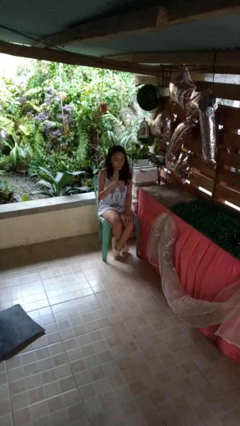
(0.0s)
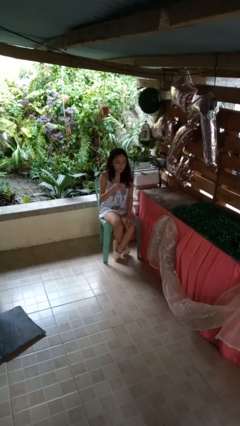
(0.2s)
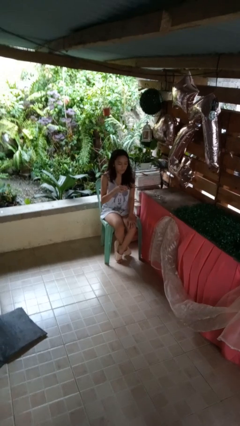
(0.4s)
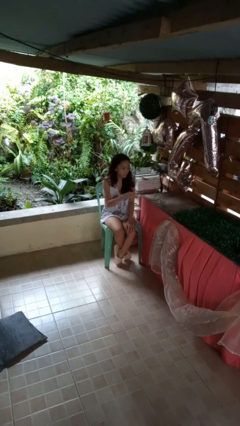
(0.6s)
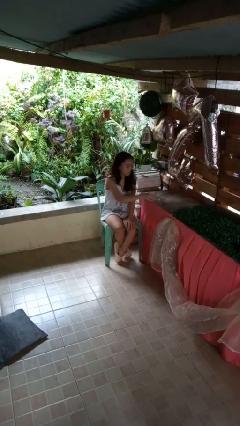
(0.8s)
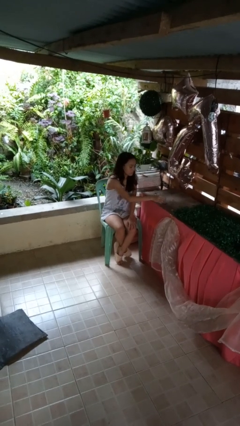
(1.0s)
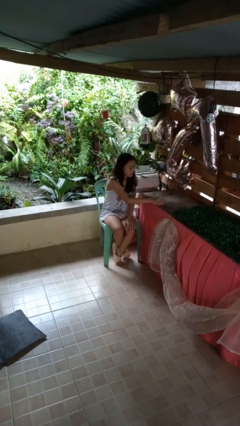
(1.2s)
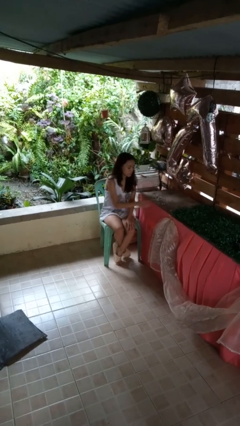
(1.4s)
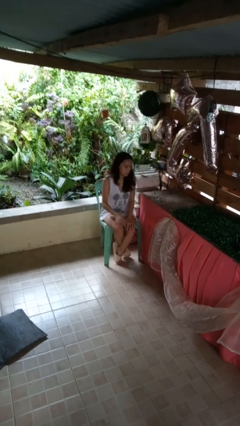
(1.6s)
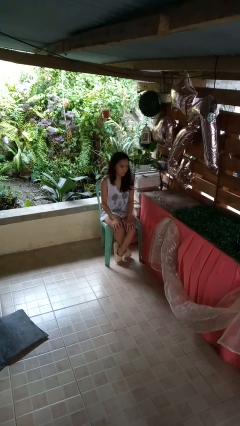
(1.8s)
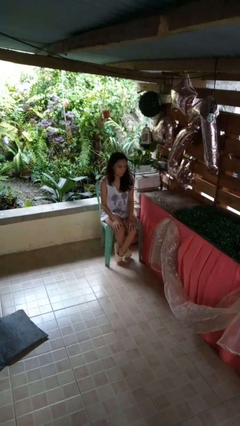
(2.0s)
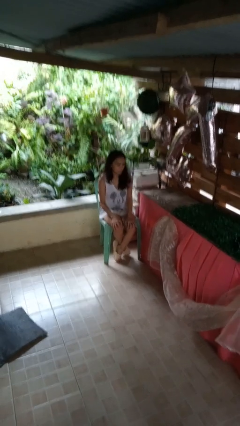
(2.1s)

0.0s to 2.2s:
person puts down object on table

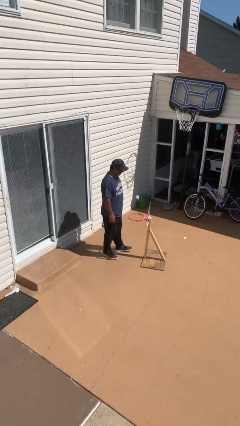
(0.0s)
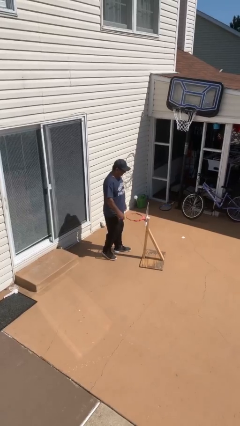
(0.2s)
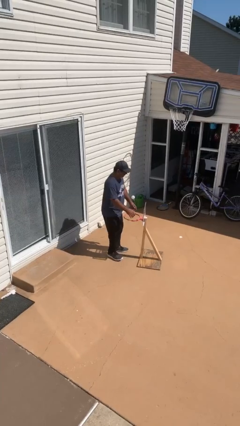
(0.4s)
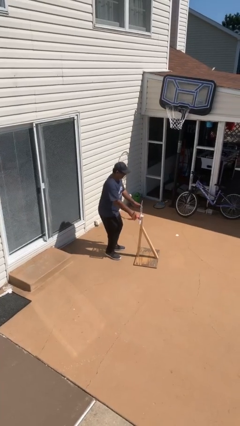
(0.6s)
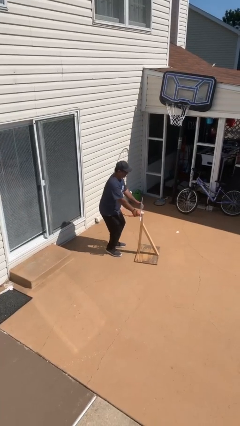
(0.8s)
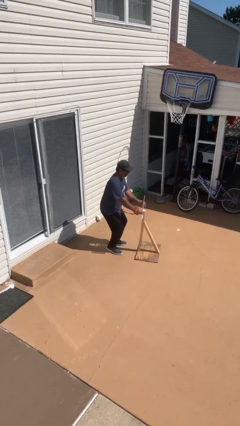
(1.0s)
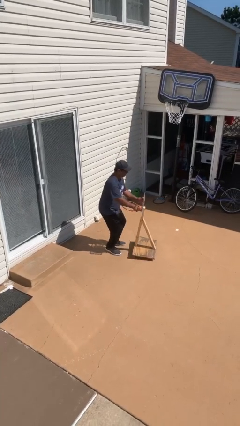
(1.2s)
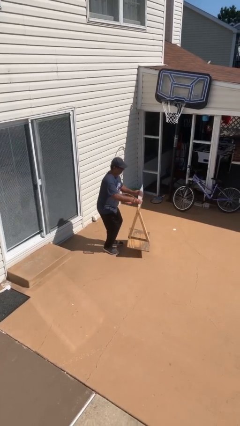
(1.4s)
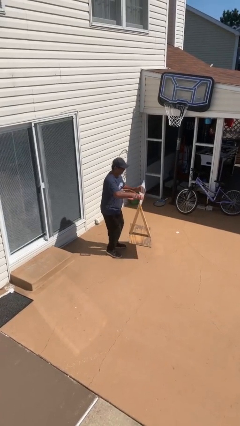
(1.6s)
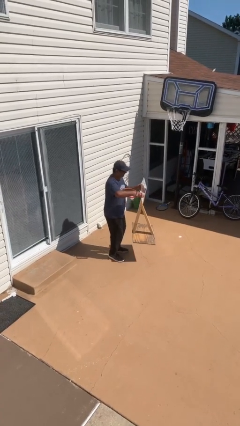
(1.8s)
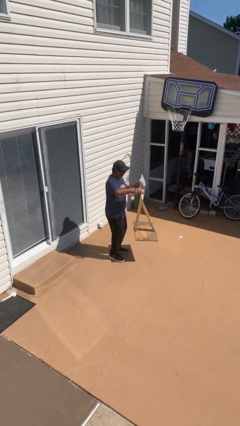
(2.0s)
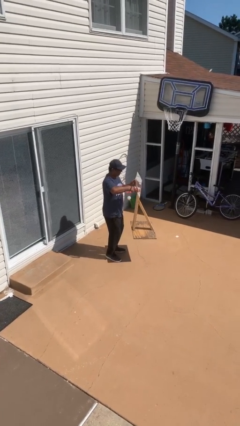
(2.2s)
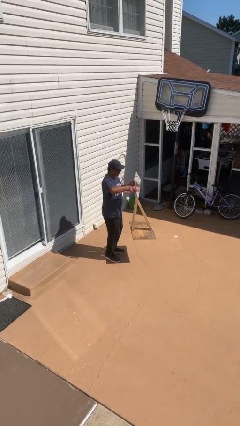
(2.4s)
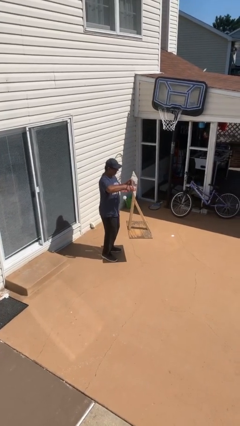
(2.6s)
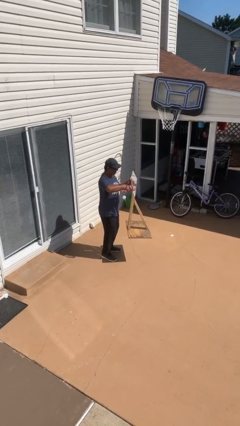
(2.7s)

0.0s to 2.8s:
person picks up object from floor

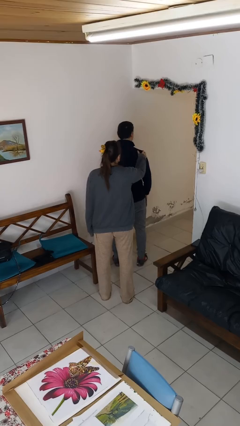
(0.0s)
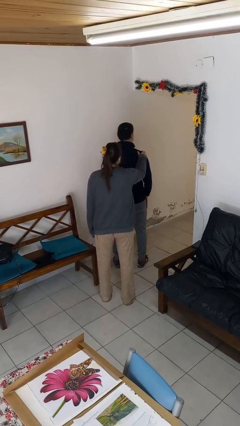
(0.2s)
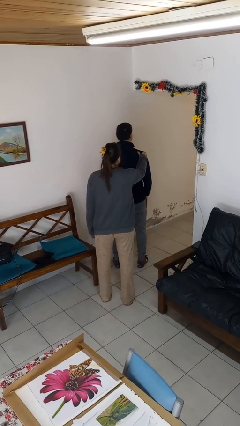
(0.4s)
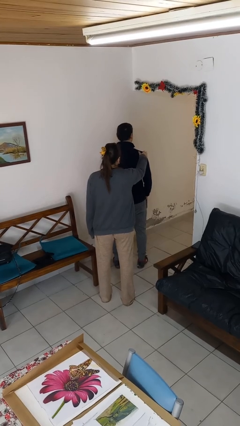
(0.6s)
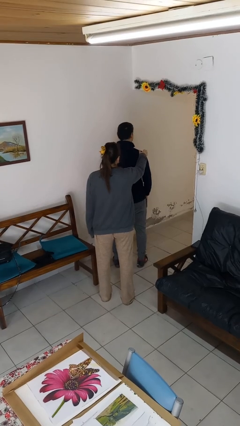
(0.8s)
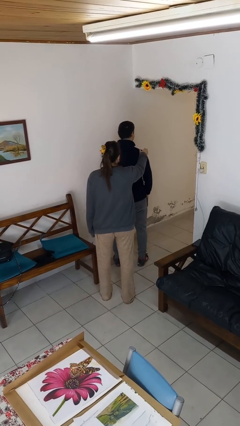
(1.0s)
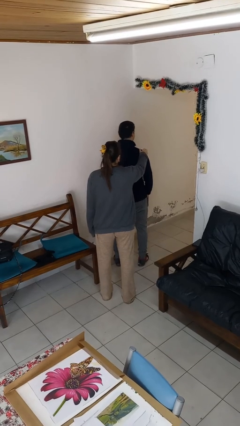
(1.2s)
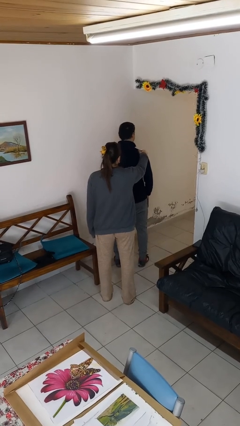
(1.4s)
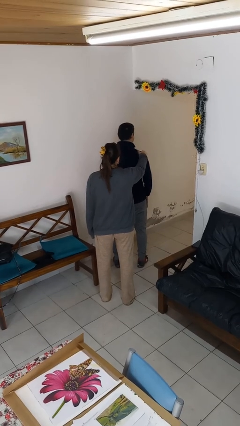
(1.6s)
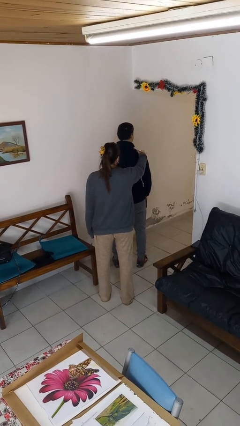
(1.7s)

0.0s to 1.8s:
person touches back of person

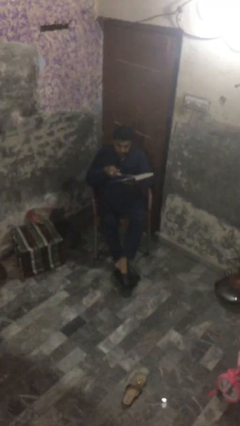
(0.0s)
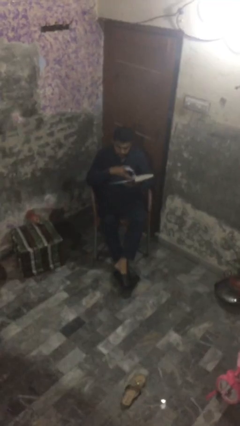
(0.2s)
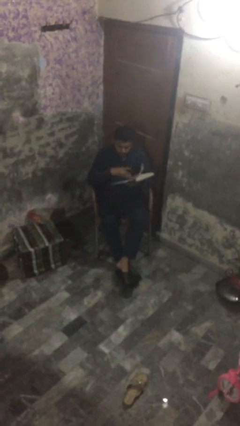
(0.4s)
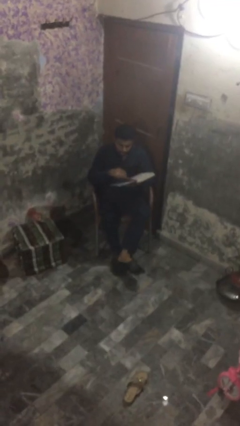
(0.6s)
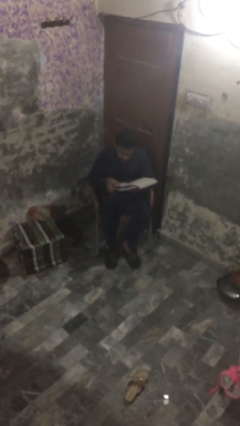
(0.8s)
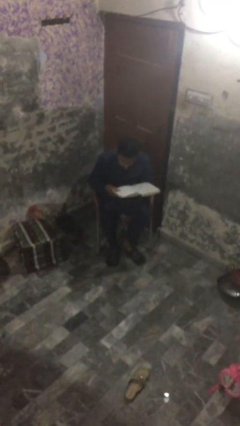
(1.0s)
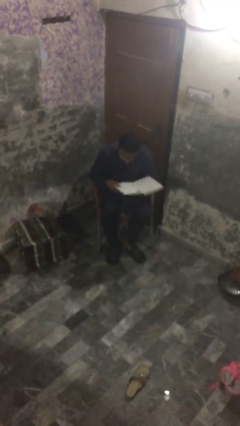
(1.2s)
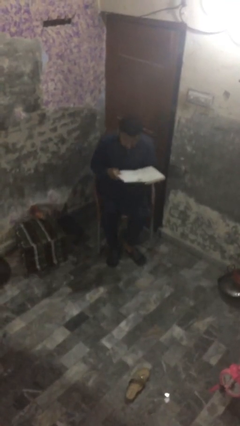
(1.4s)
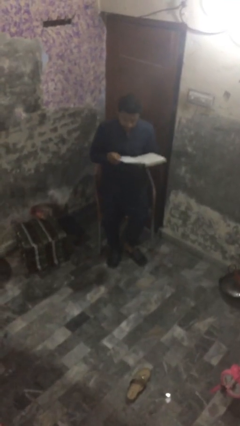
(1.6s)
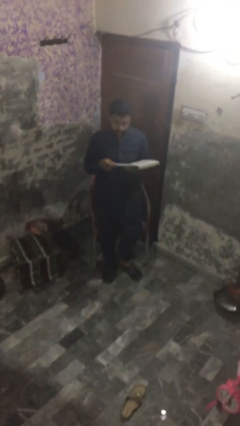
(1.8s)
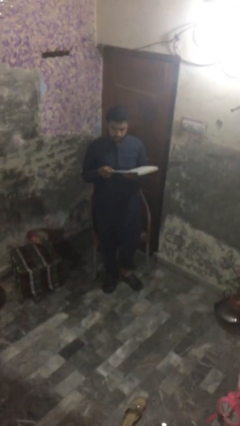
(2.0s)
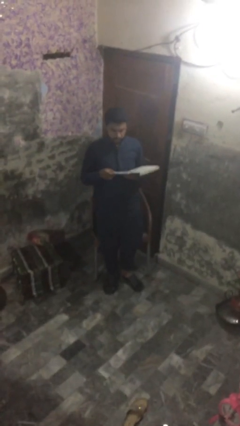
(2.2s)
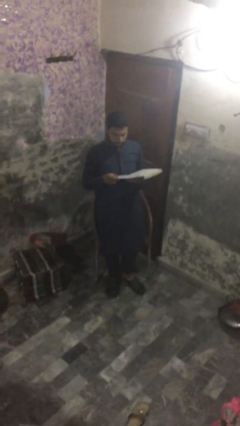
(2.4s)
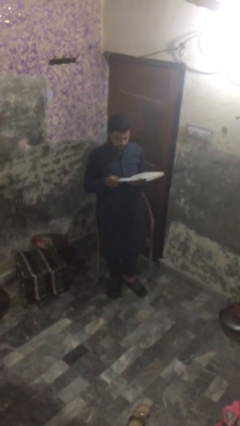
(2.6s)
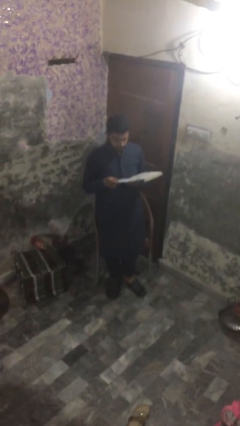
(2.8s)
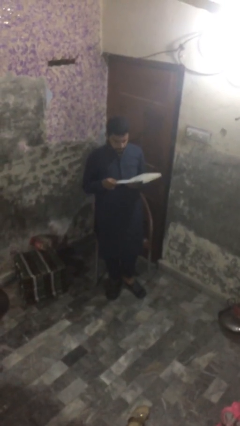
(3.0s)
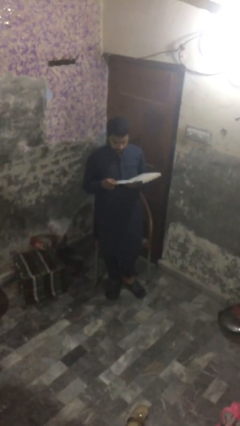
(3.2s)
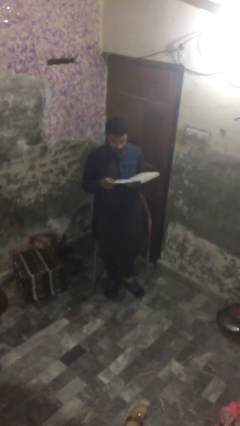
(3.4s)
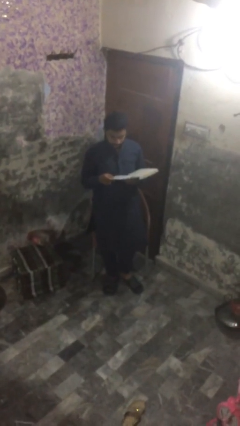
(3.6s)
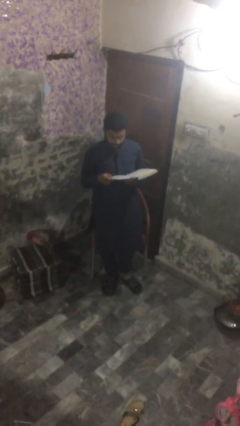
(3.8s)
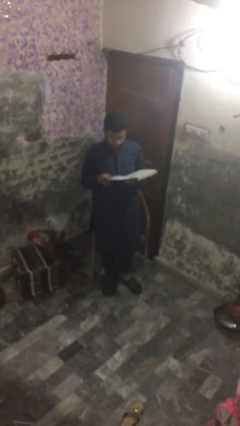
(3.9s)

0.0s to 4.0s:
person stands up

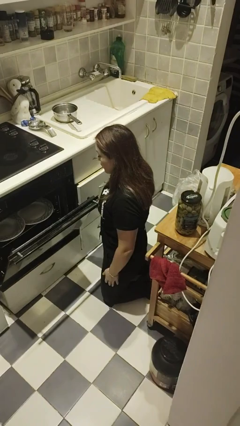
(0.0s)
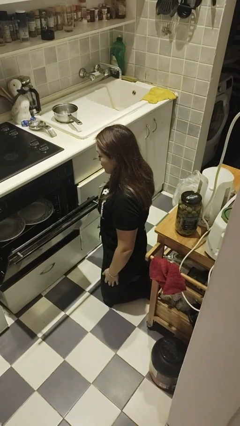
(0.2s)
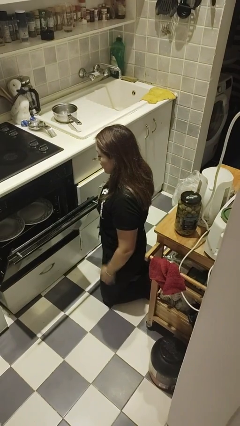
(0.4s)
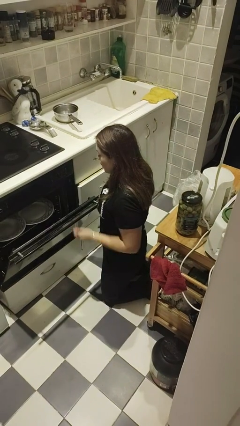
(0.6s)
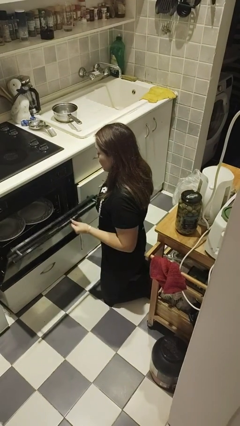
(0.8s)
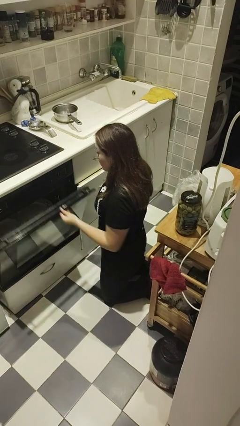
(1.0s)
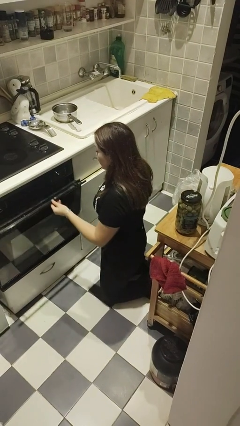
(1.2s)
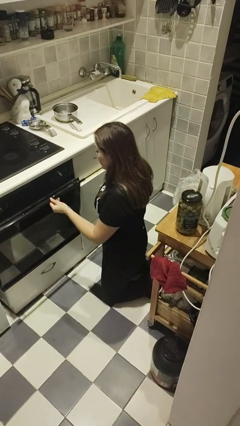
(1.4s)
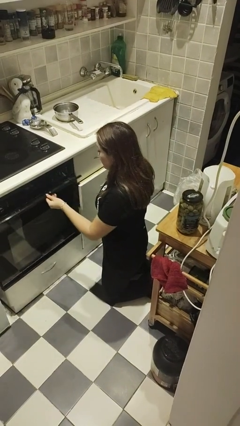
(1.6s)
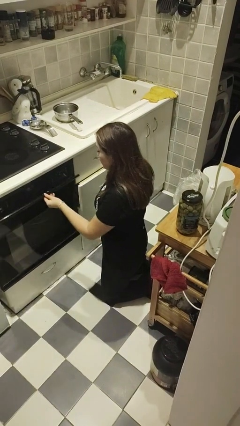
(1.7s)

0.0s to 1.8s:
person closes oven door

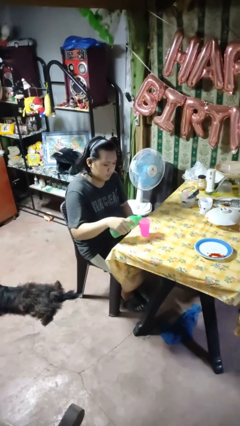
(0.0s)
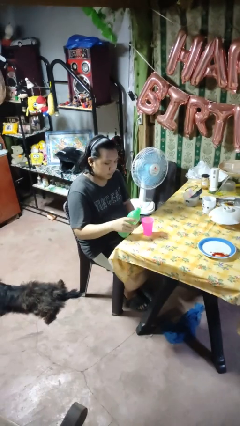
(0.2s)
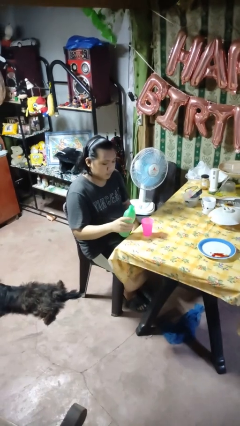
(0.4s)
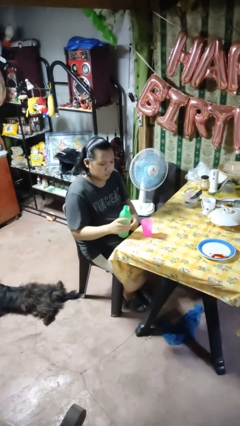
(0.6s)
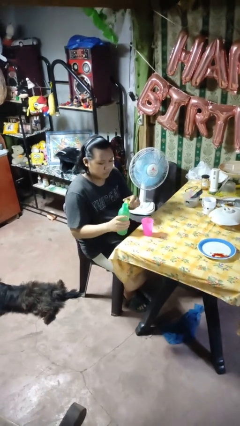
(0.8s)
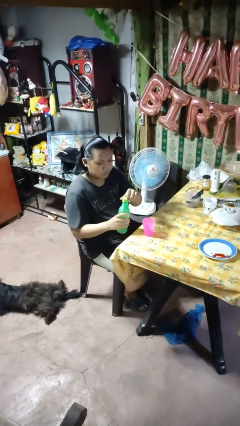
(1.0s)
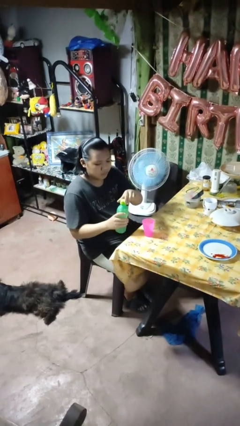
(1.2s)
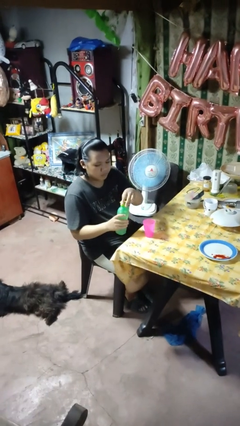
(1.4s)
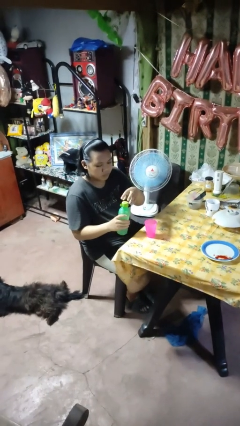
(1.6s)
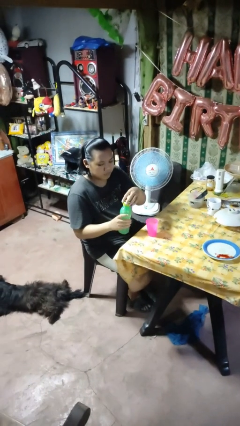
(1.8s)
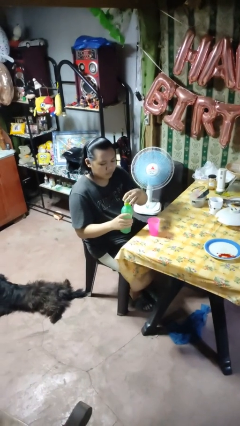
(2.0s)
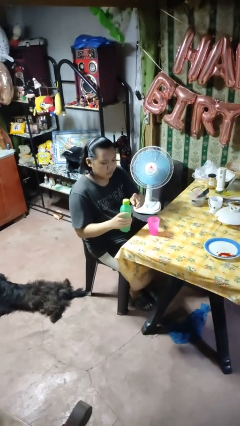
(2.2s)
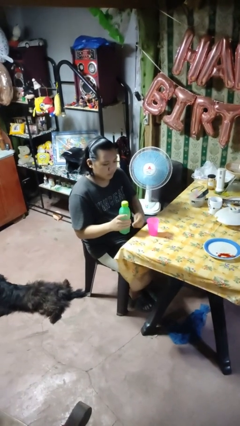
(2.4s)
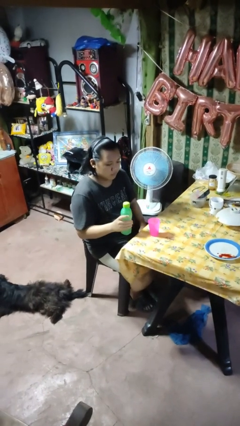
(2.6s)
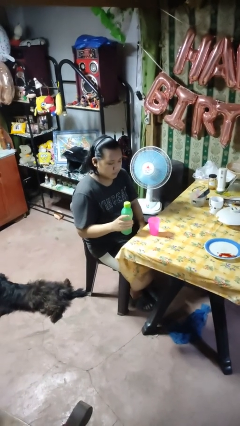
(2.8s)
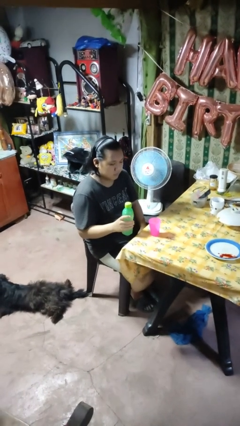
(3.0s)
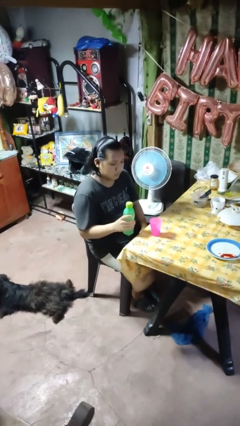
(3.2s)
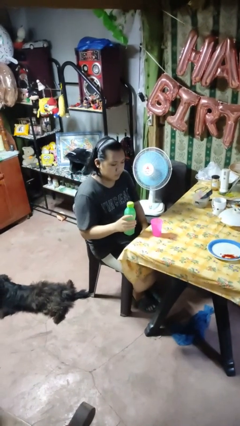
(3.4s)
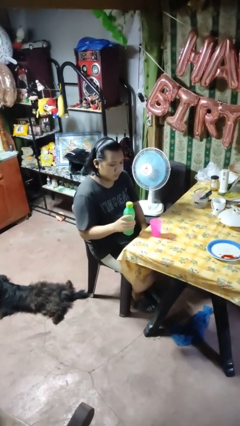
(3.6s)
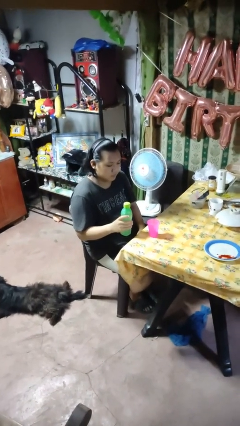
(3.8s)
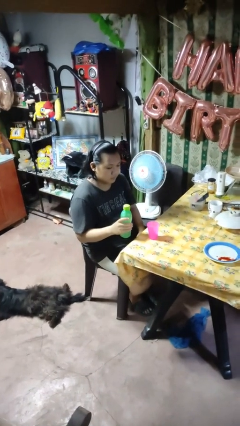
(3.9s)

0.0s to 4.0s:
person screws lid to bottle

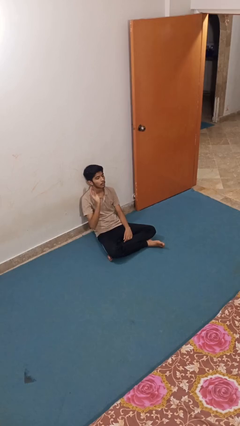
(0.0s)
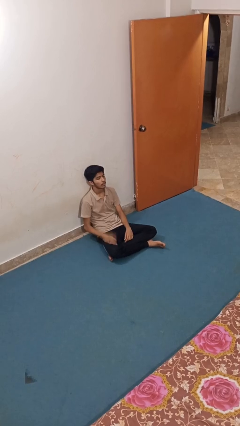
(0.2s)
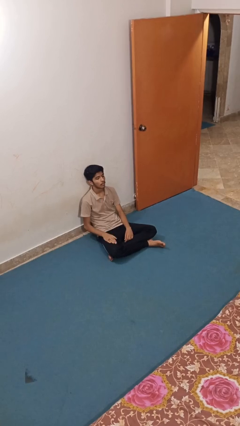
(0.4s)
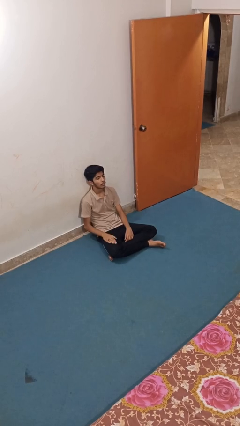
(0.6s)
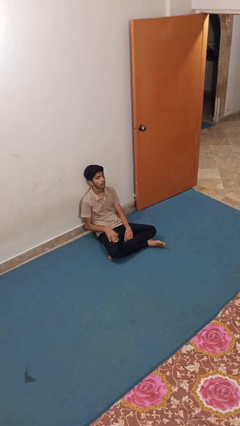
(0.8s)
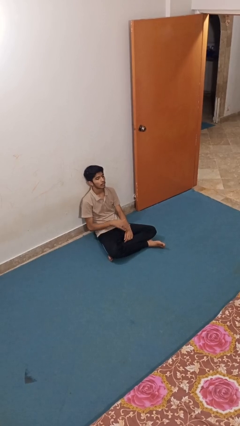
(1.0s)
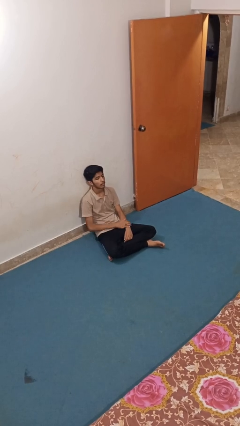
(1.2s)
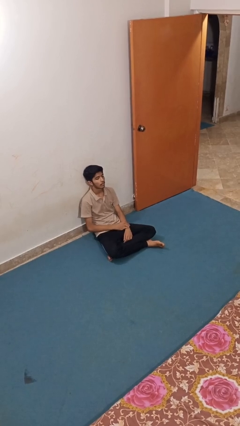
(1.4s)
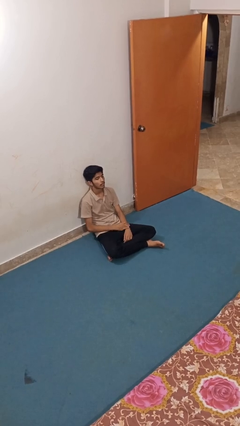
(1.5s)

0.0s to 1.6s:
person slaps hands on thighs
